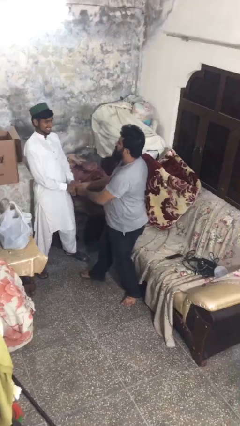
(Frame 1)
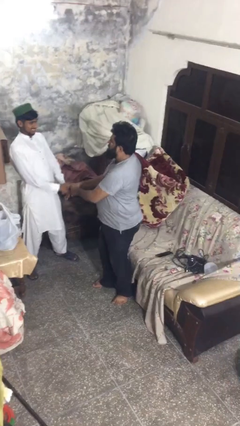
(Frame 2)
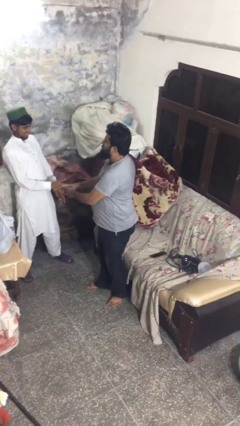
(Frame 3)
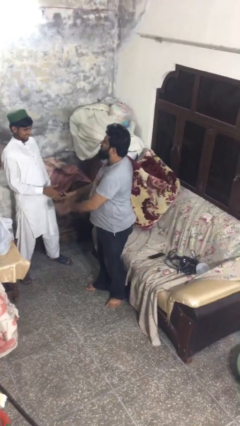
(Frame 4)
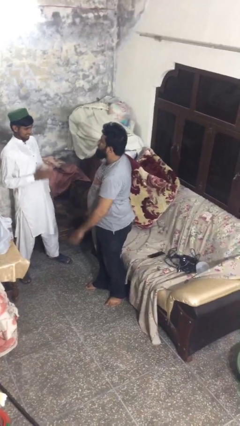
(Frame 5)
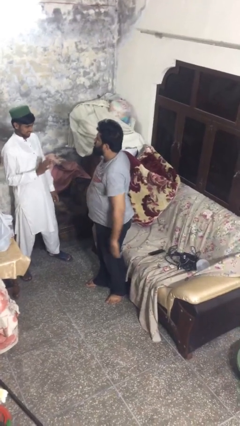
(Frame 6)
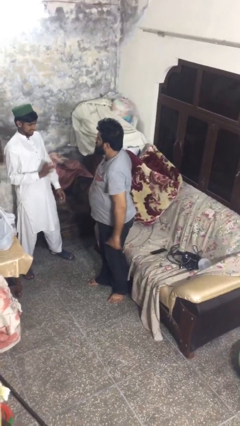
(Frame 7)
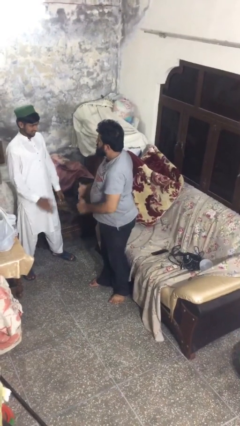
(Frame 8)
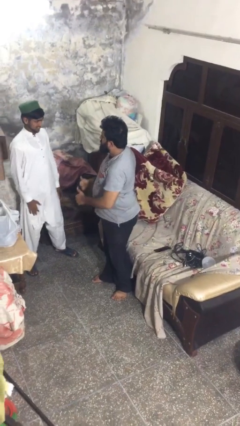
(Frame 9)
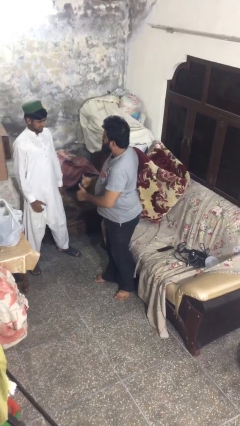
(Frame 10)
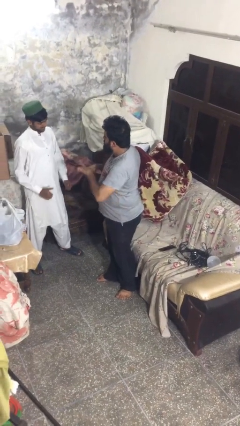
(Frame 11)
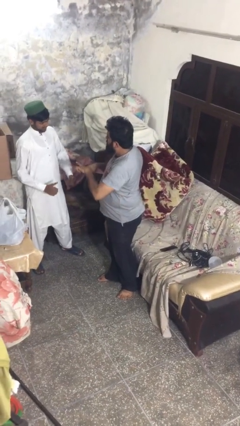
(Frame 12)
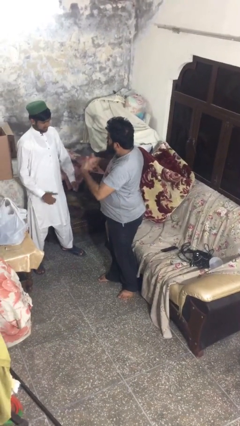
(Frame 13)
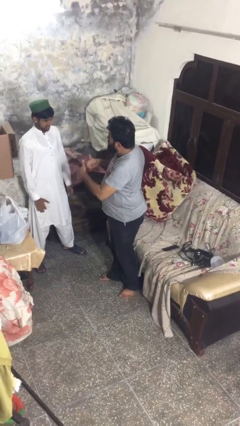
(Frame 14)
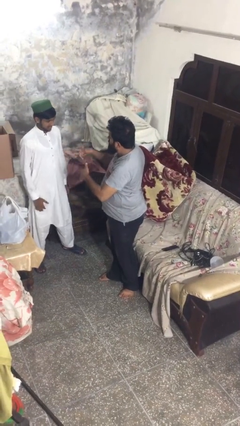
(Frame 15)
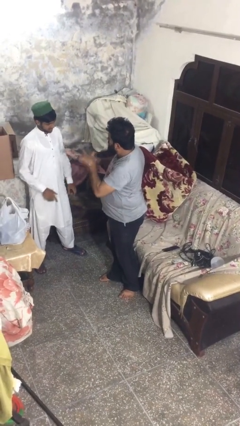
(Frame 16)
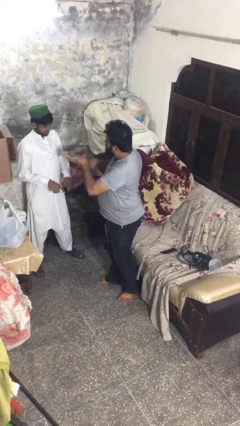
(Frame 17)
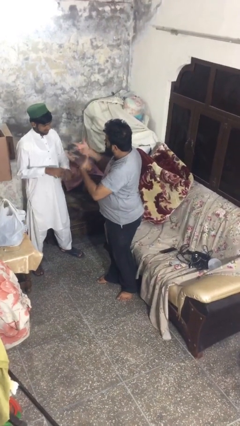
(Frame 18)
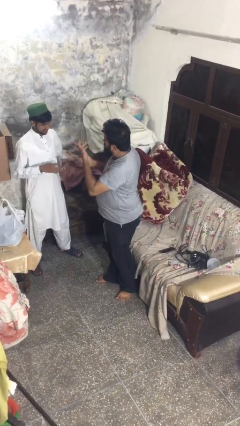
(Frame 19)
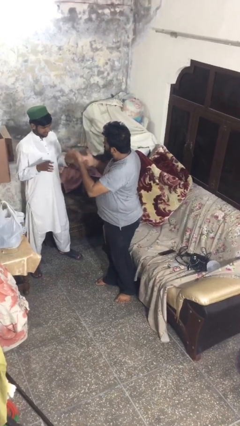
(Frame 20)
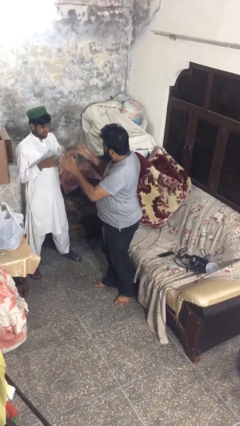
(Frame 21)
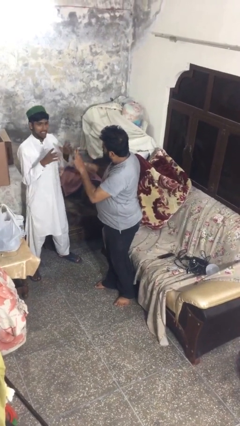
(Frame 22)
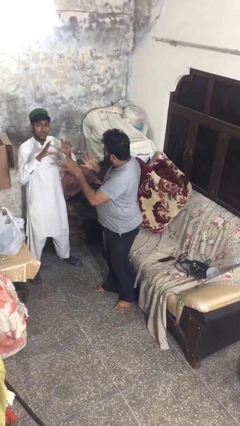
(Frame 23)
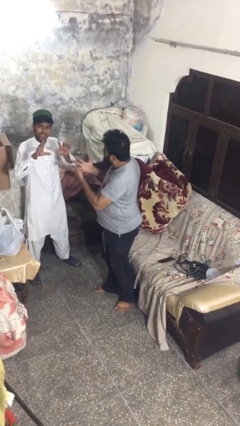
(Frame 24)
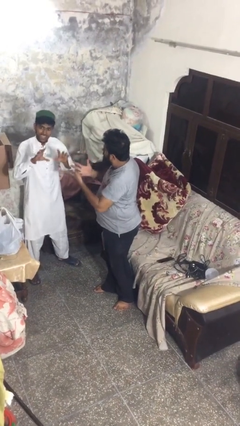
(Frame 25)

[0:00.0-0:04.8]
person talks to person

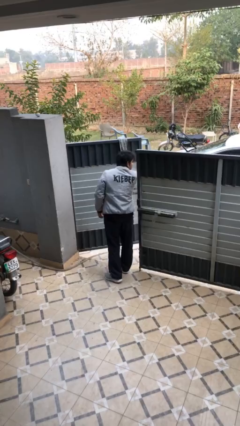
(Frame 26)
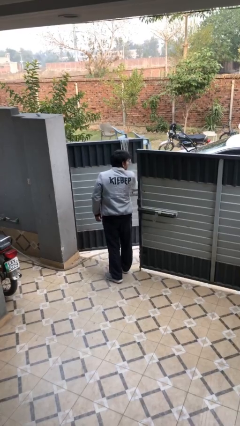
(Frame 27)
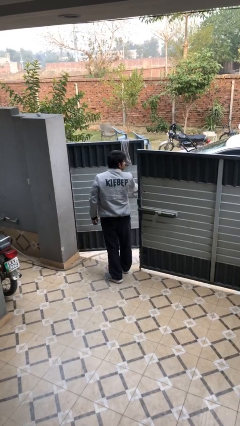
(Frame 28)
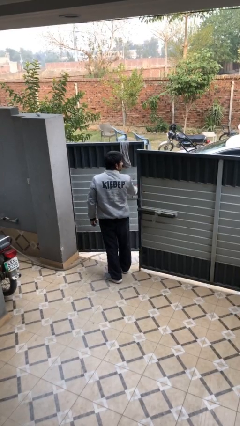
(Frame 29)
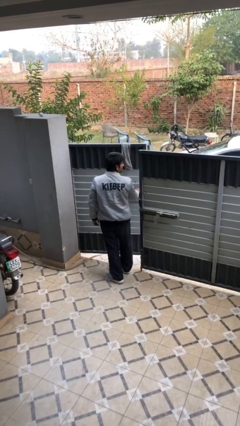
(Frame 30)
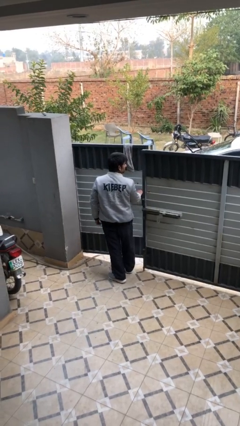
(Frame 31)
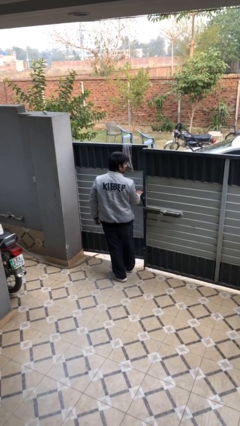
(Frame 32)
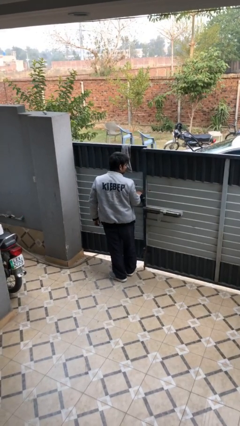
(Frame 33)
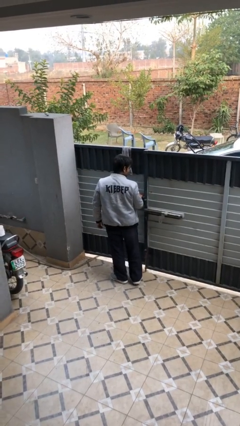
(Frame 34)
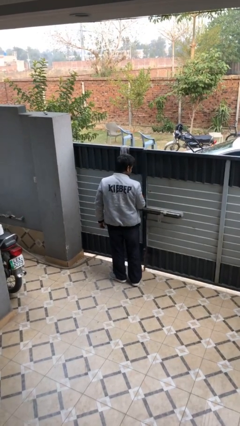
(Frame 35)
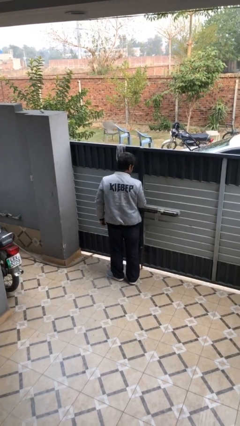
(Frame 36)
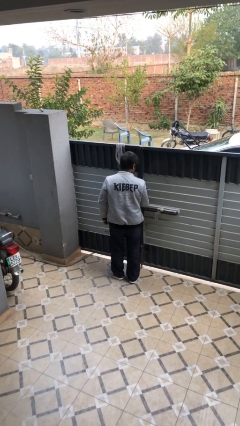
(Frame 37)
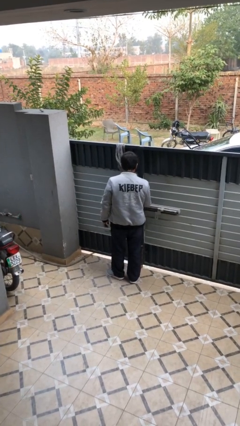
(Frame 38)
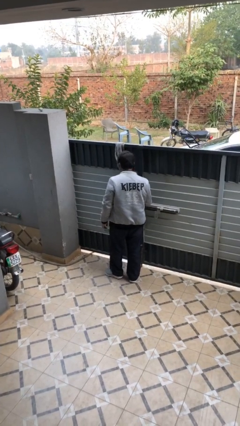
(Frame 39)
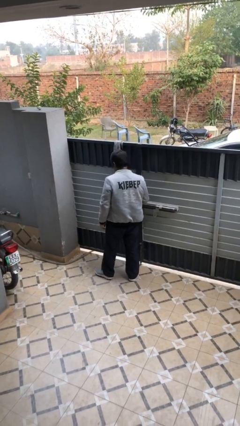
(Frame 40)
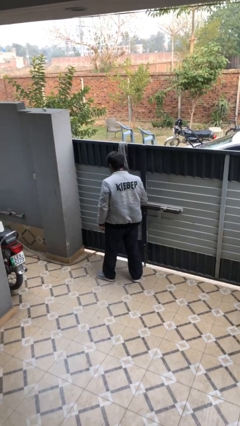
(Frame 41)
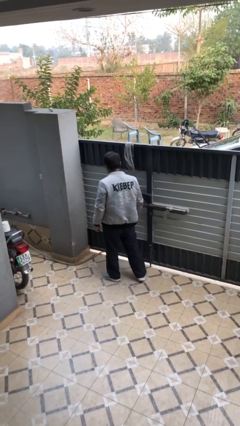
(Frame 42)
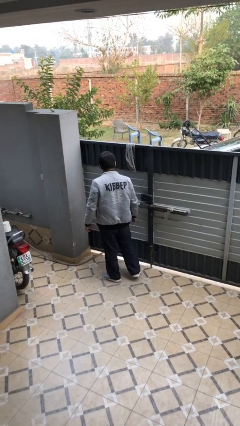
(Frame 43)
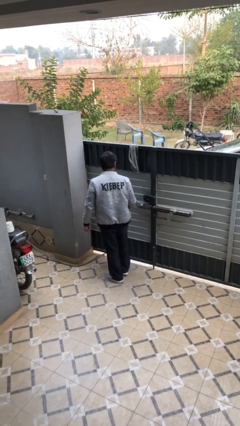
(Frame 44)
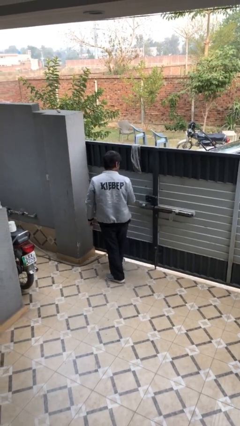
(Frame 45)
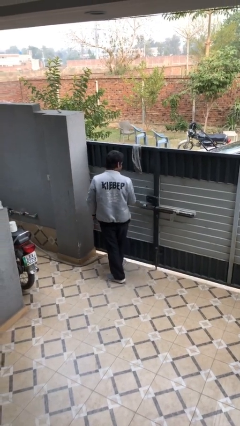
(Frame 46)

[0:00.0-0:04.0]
person closes facility door

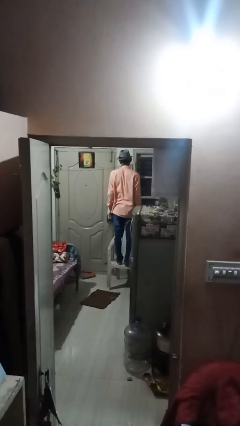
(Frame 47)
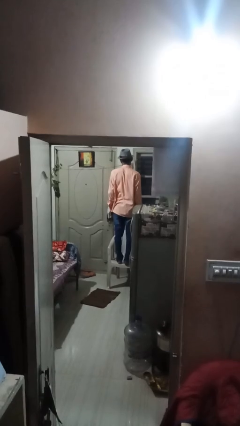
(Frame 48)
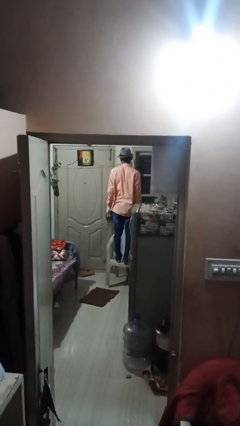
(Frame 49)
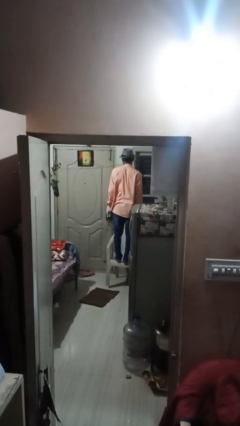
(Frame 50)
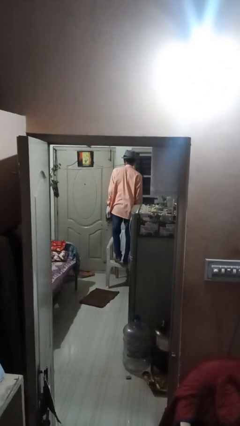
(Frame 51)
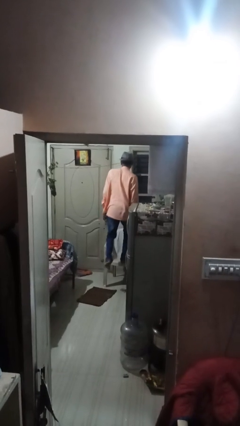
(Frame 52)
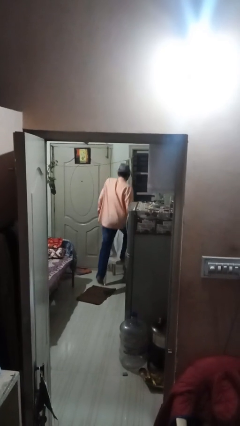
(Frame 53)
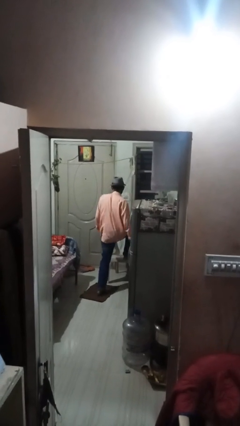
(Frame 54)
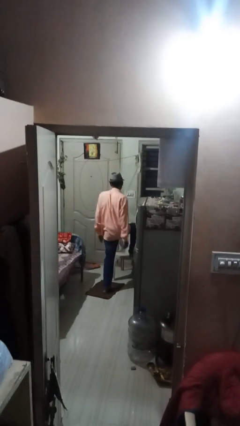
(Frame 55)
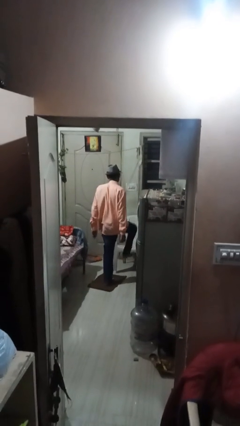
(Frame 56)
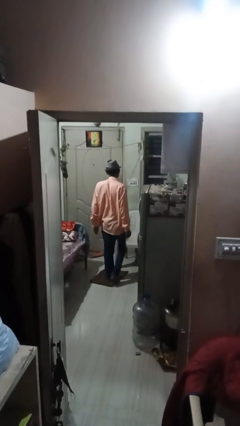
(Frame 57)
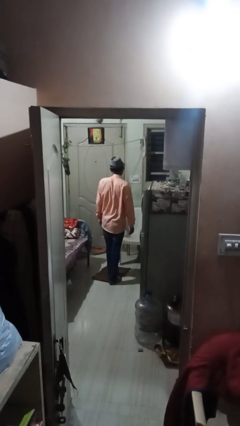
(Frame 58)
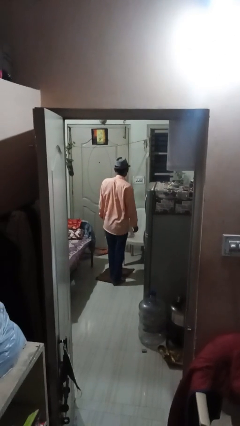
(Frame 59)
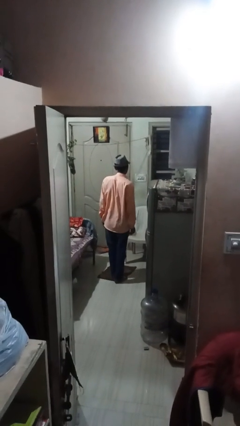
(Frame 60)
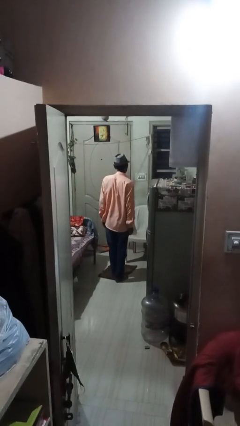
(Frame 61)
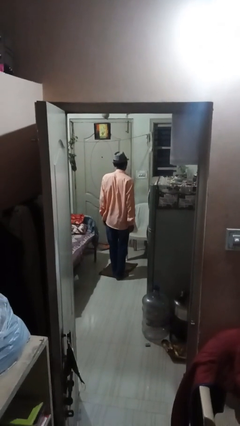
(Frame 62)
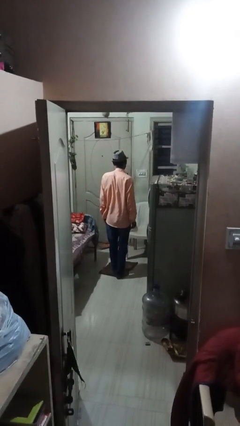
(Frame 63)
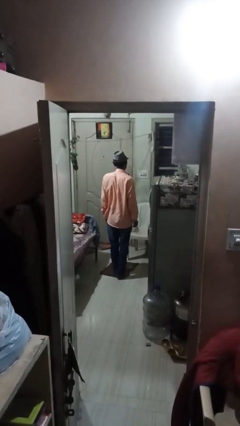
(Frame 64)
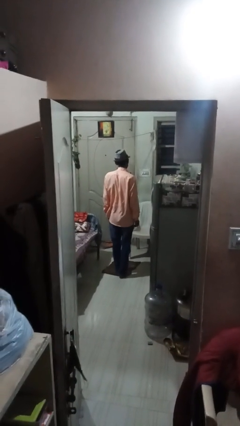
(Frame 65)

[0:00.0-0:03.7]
person climbs off chair

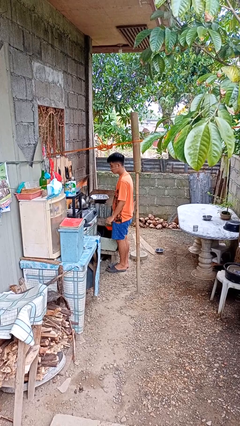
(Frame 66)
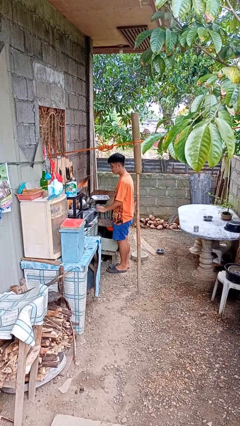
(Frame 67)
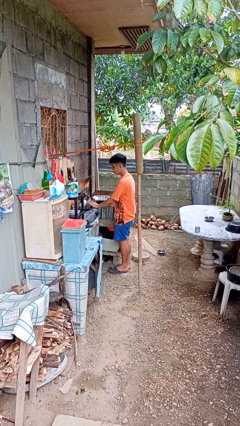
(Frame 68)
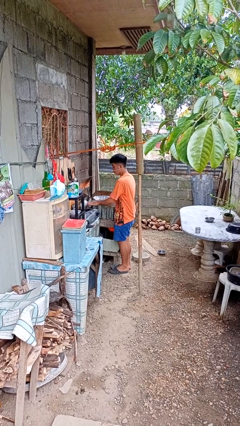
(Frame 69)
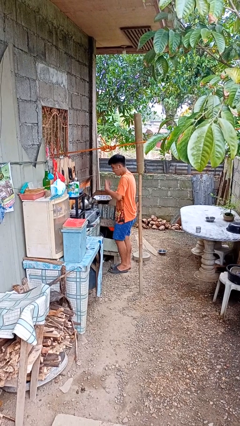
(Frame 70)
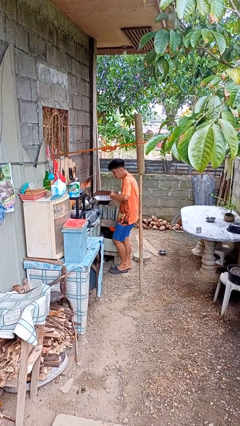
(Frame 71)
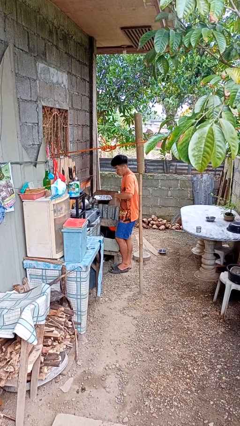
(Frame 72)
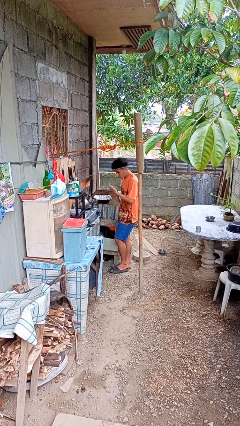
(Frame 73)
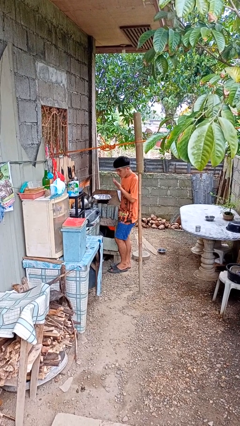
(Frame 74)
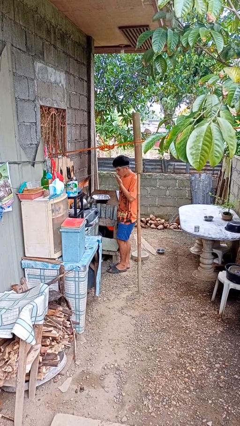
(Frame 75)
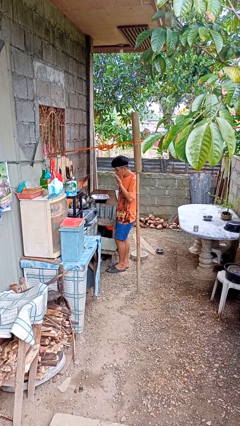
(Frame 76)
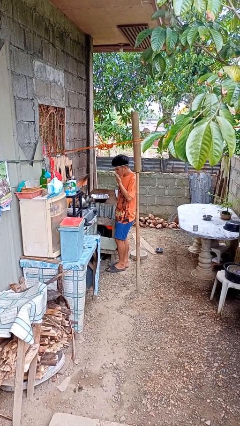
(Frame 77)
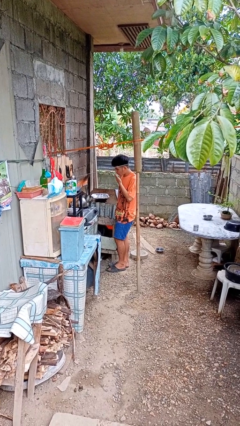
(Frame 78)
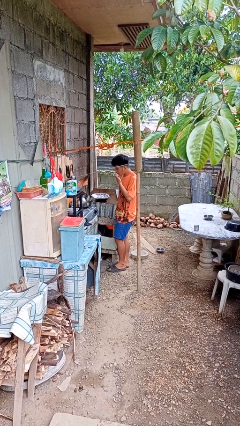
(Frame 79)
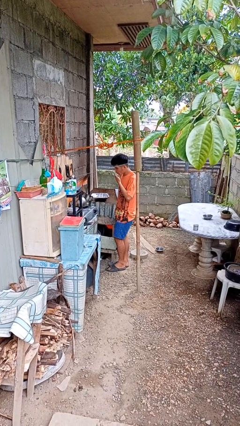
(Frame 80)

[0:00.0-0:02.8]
person burns hand

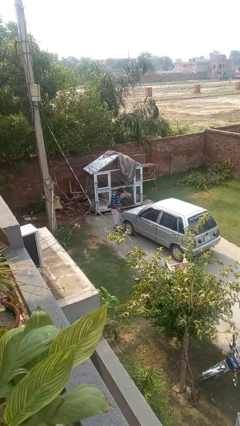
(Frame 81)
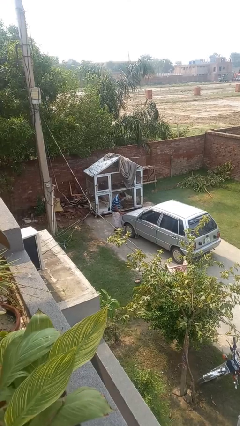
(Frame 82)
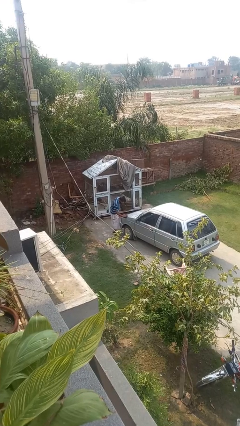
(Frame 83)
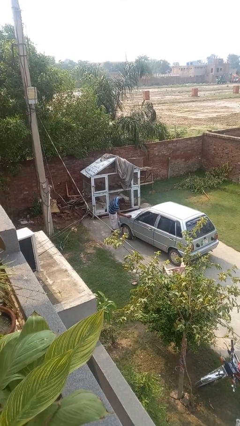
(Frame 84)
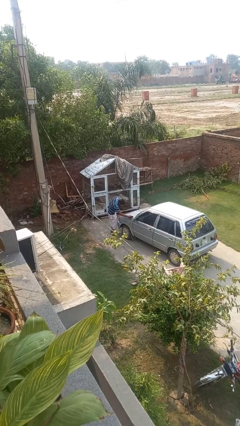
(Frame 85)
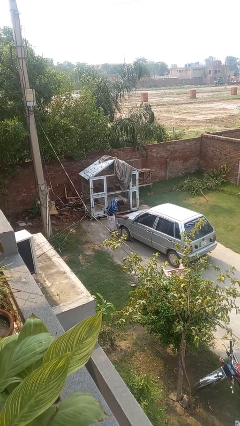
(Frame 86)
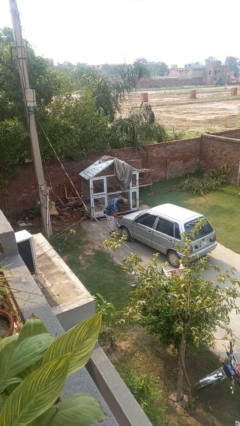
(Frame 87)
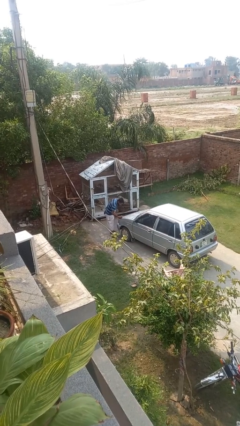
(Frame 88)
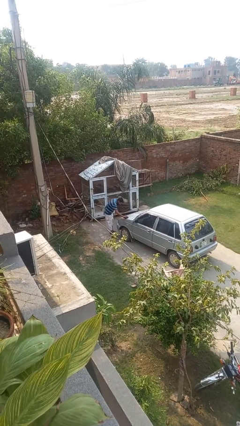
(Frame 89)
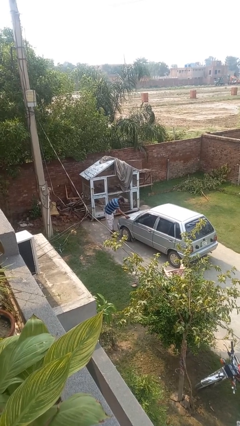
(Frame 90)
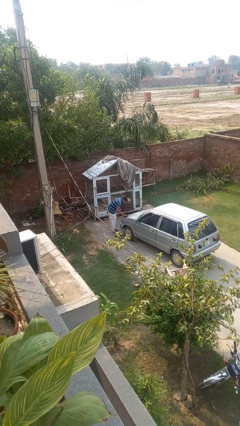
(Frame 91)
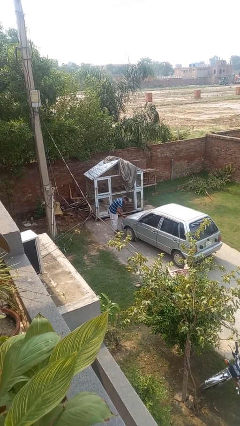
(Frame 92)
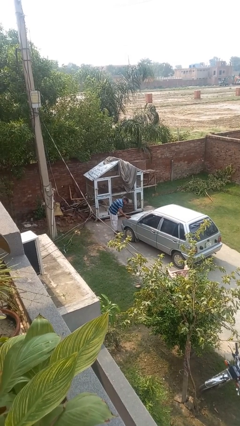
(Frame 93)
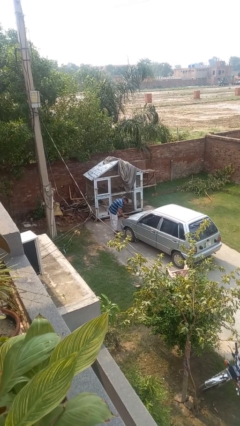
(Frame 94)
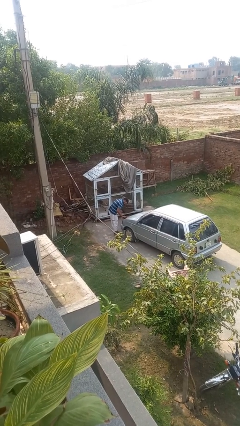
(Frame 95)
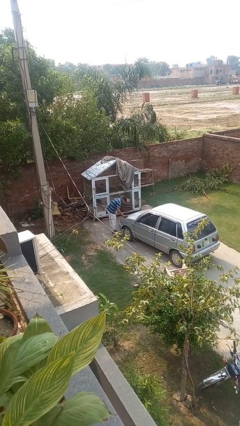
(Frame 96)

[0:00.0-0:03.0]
person polishes car with rag
